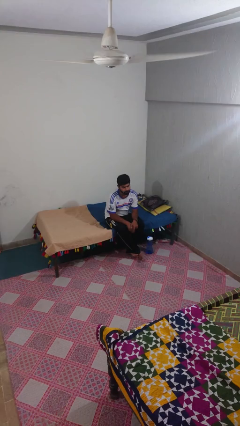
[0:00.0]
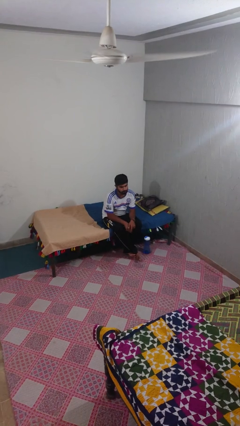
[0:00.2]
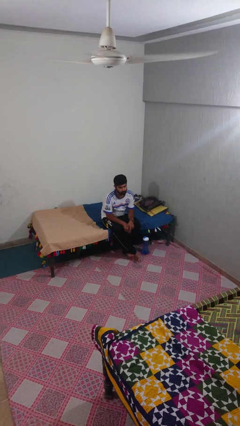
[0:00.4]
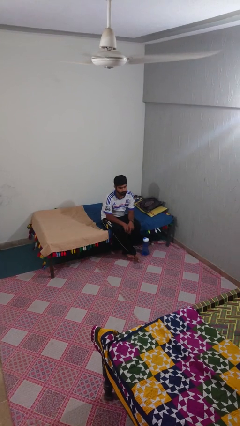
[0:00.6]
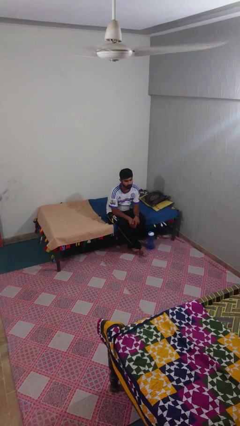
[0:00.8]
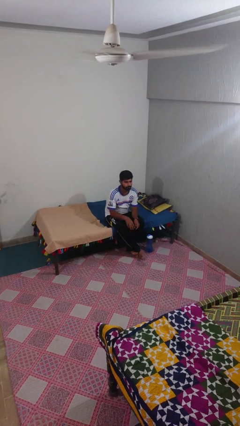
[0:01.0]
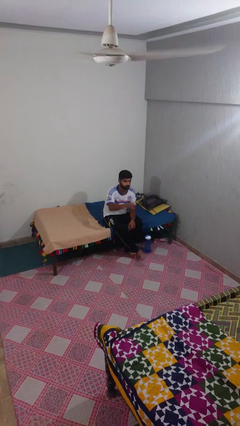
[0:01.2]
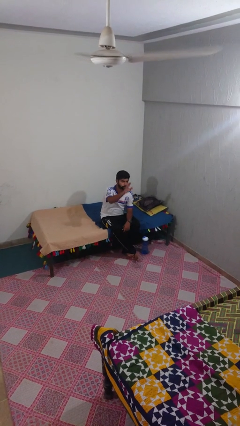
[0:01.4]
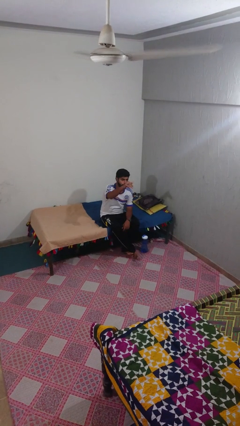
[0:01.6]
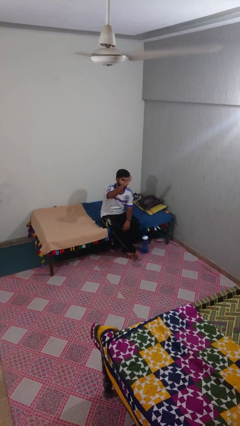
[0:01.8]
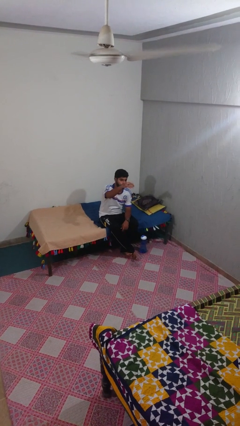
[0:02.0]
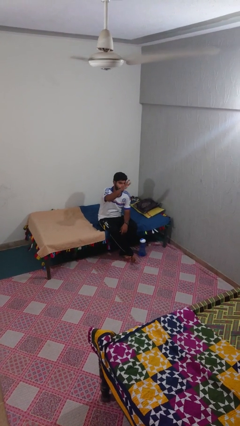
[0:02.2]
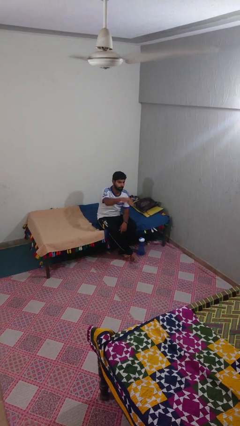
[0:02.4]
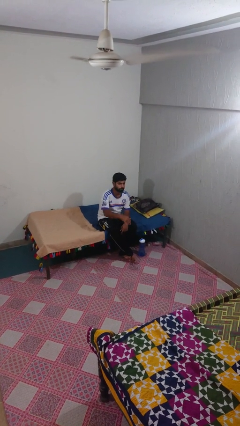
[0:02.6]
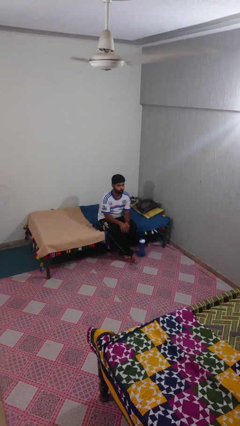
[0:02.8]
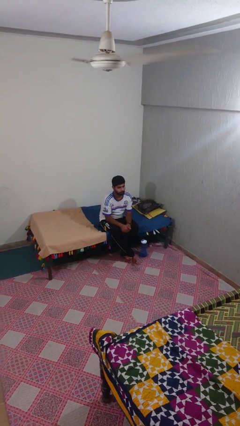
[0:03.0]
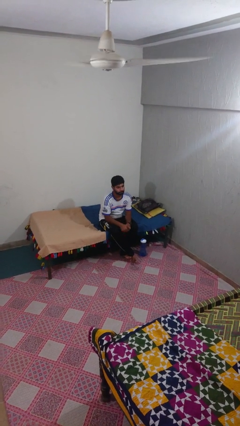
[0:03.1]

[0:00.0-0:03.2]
person gestures come here

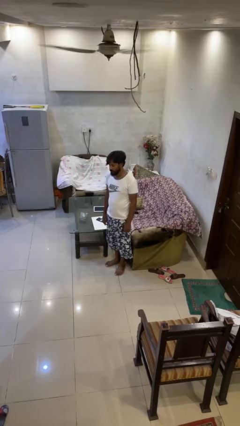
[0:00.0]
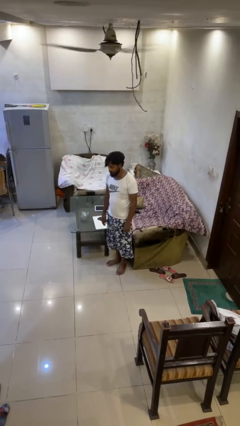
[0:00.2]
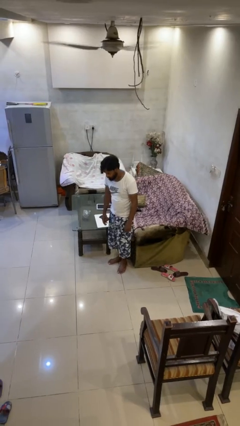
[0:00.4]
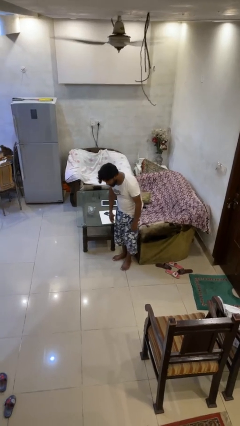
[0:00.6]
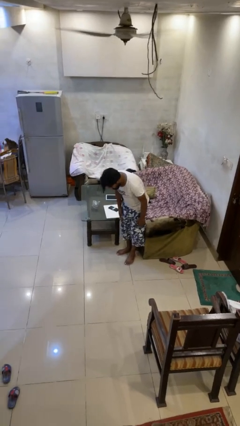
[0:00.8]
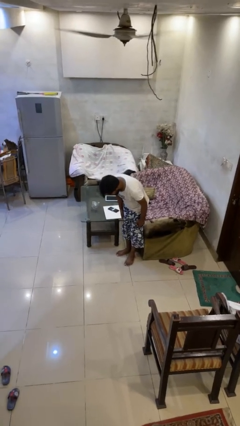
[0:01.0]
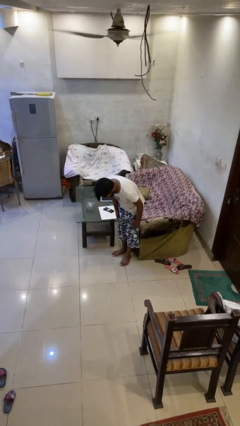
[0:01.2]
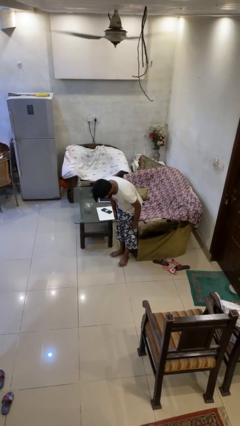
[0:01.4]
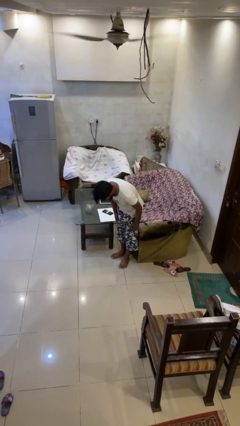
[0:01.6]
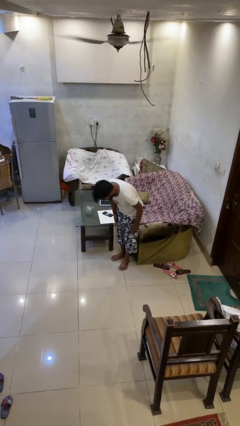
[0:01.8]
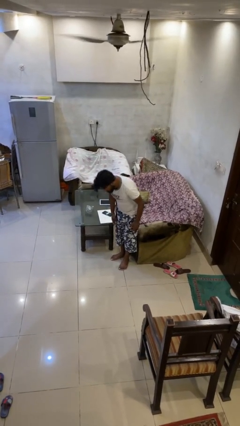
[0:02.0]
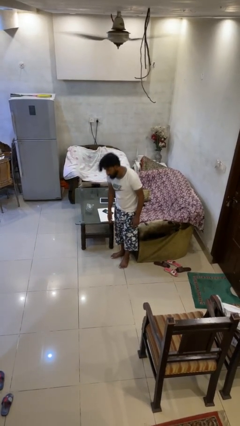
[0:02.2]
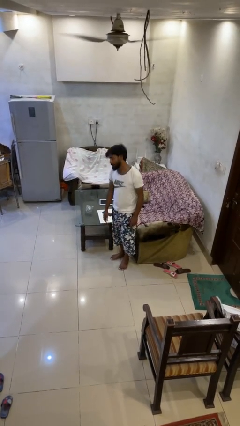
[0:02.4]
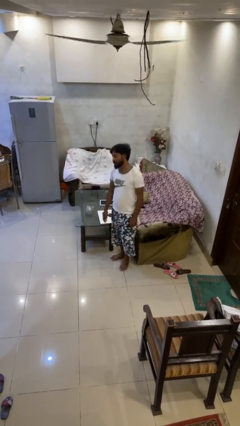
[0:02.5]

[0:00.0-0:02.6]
person bows

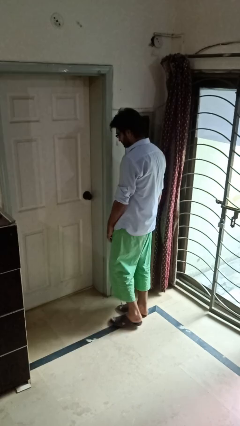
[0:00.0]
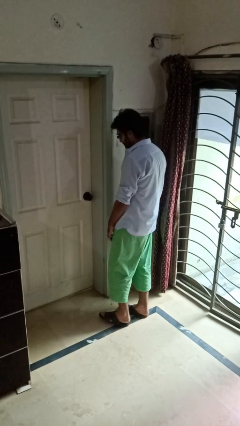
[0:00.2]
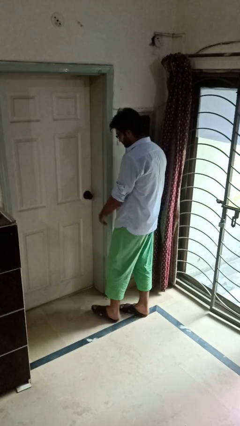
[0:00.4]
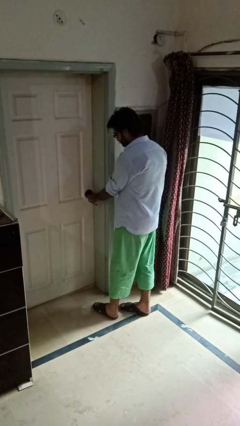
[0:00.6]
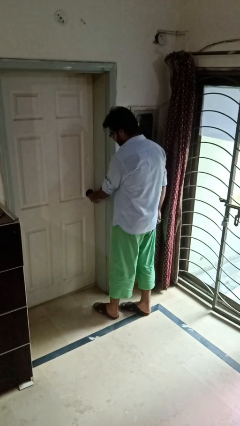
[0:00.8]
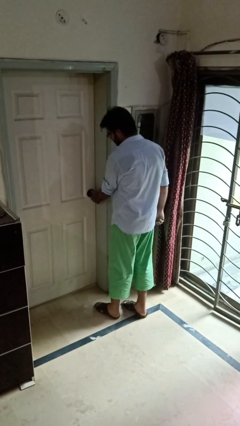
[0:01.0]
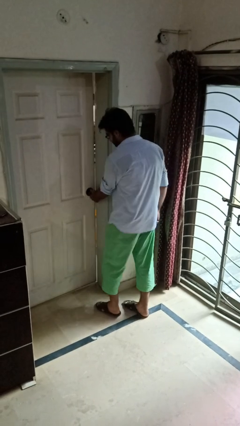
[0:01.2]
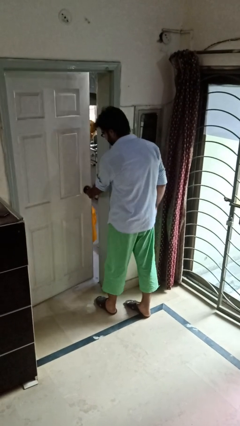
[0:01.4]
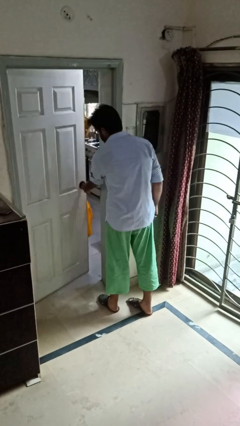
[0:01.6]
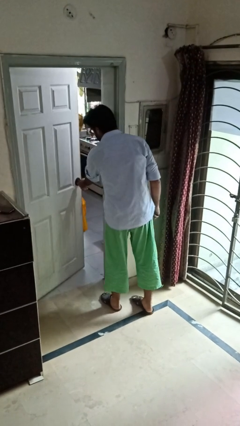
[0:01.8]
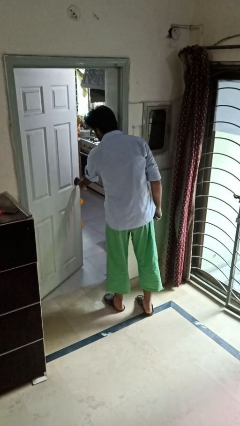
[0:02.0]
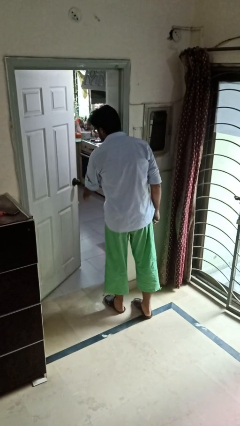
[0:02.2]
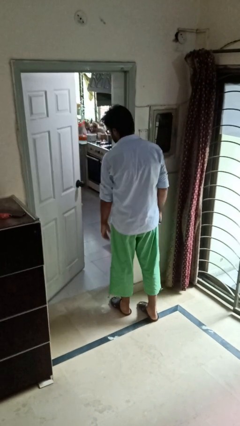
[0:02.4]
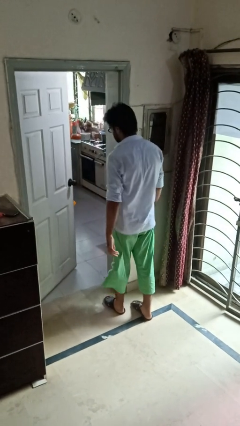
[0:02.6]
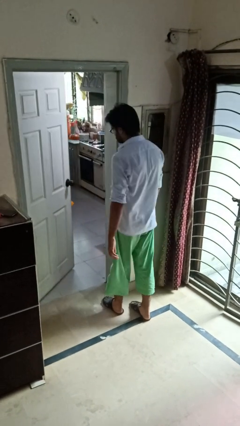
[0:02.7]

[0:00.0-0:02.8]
person opens facility door

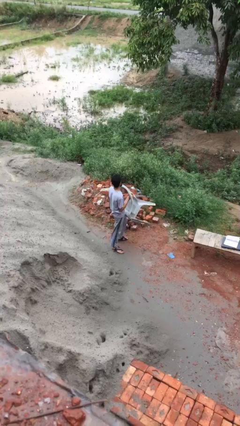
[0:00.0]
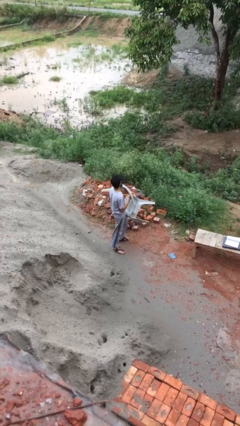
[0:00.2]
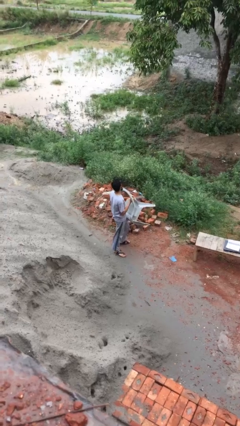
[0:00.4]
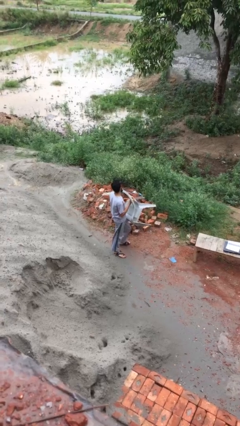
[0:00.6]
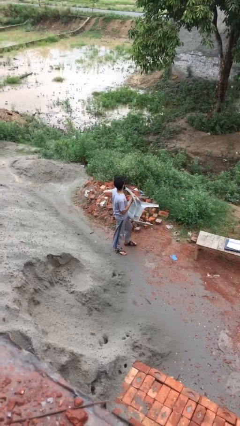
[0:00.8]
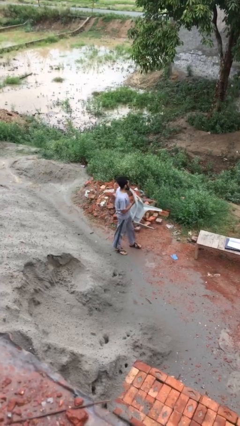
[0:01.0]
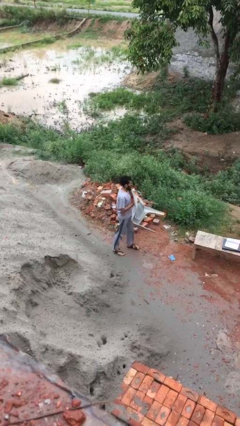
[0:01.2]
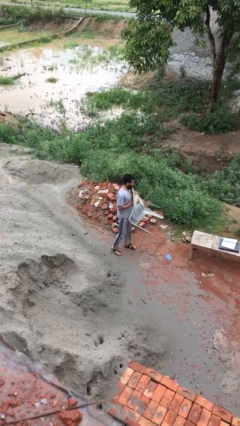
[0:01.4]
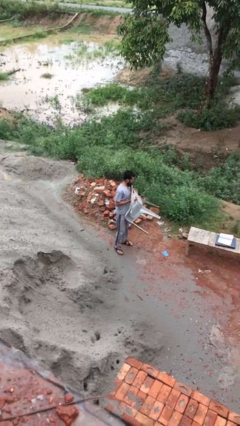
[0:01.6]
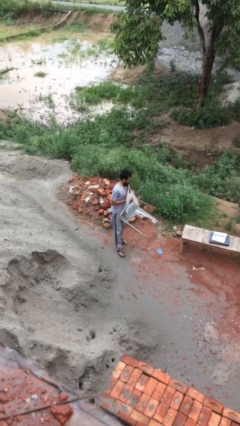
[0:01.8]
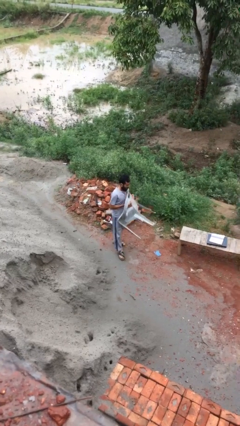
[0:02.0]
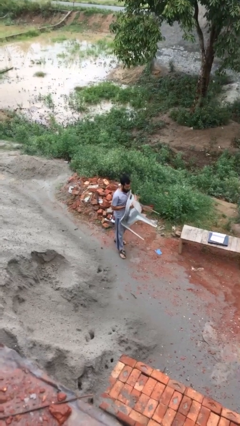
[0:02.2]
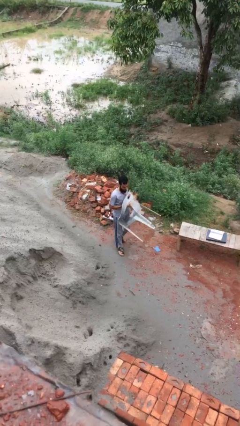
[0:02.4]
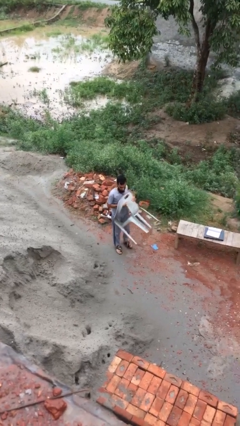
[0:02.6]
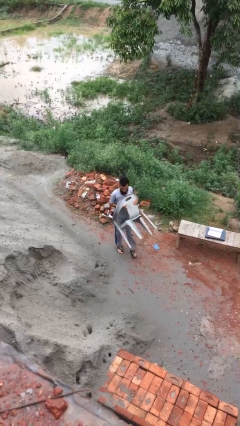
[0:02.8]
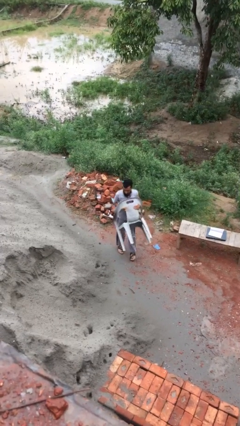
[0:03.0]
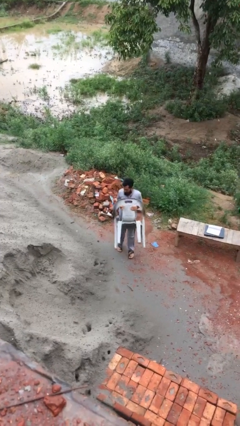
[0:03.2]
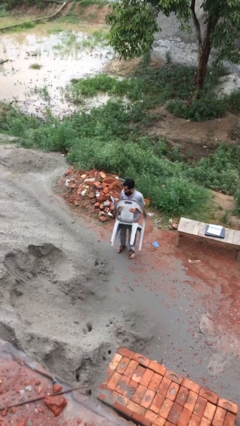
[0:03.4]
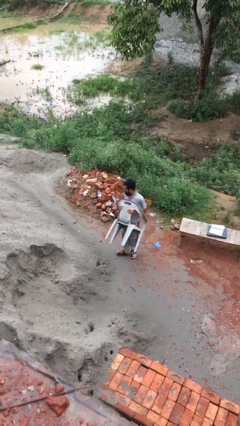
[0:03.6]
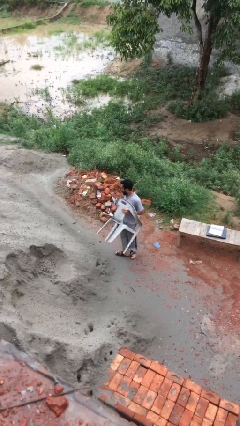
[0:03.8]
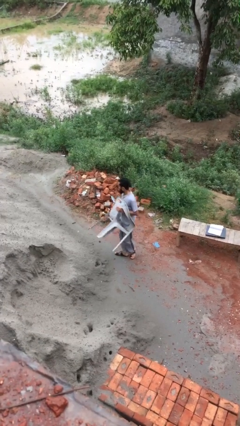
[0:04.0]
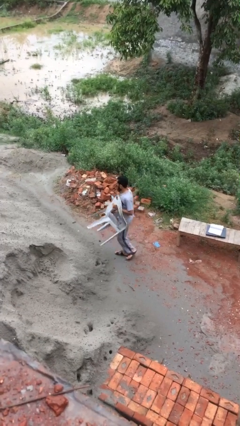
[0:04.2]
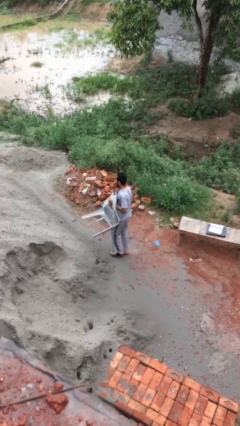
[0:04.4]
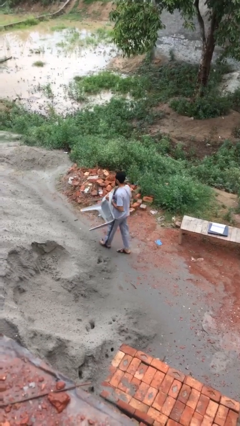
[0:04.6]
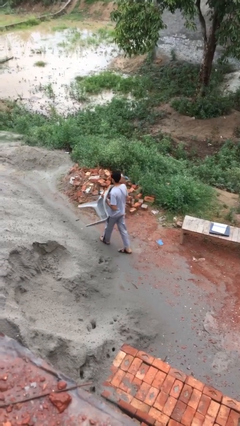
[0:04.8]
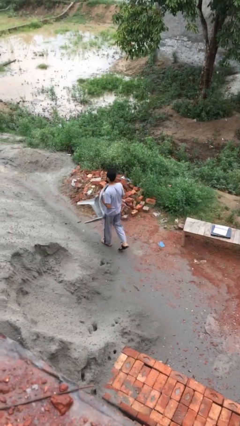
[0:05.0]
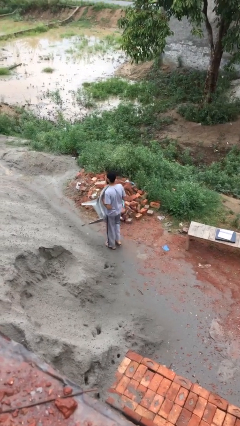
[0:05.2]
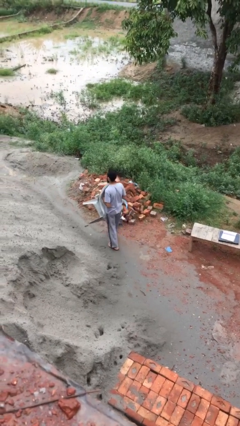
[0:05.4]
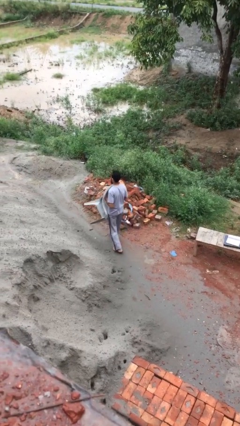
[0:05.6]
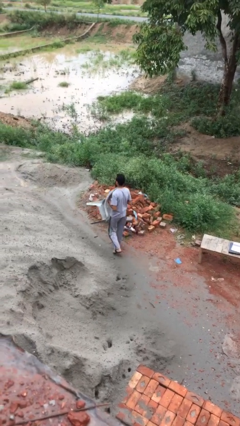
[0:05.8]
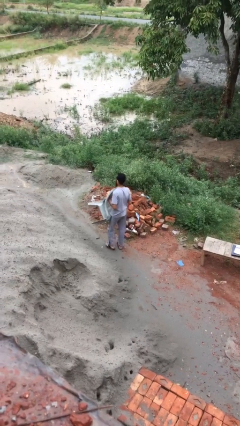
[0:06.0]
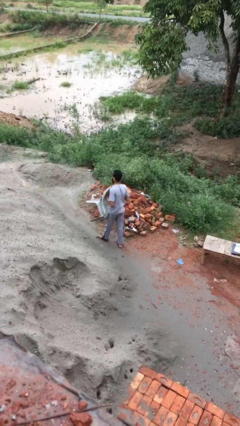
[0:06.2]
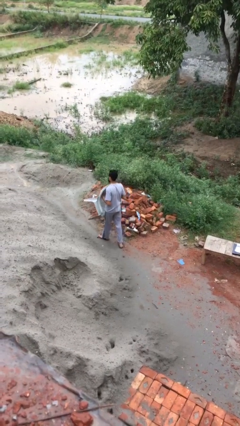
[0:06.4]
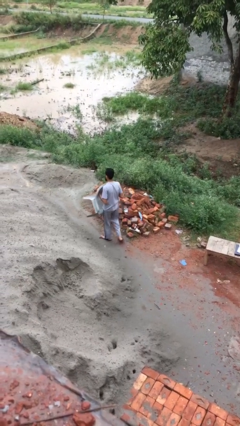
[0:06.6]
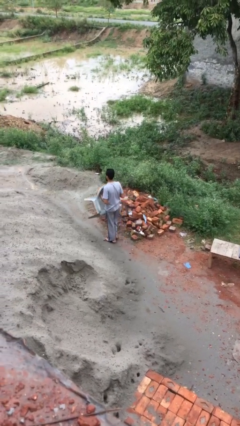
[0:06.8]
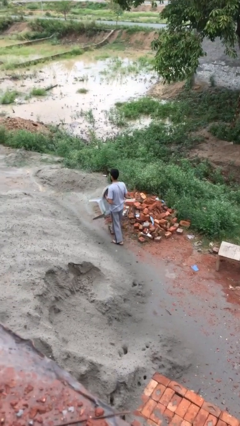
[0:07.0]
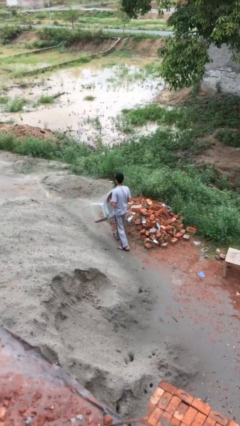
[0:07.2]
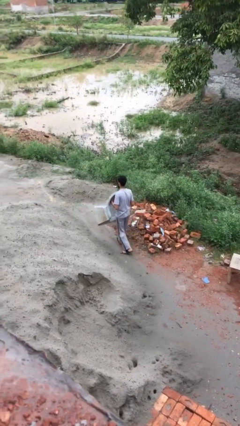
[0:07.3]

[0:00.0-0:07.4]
person puts down object on floor

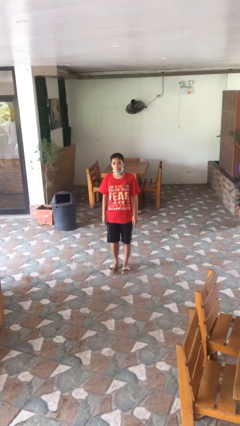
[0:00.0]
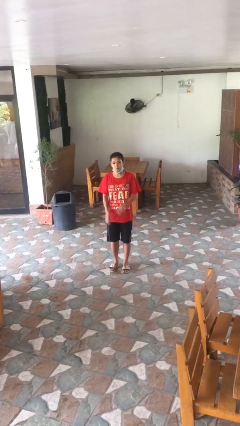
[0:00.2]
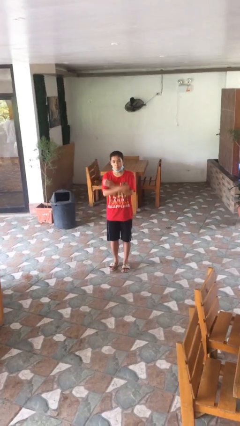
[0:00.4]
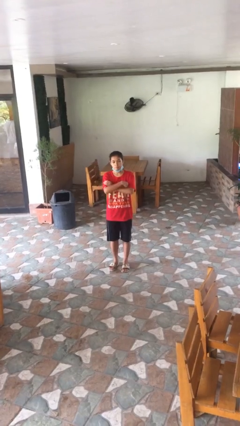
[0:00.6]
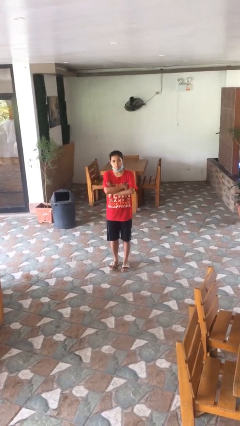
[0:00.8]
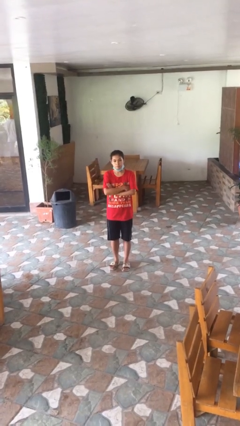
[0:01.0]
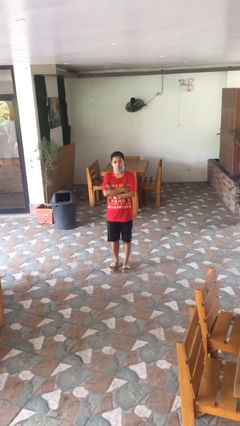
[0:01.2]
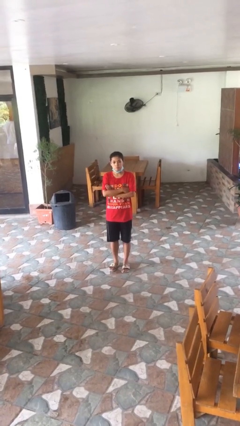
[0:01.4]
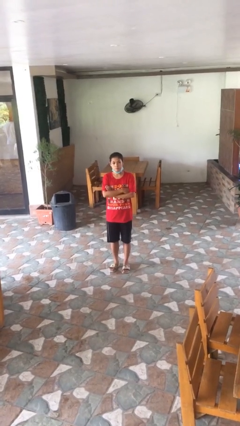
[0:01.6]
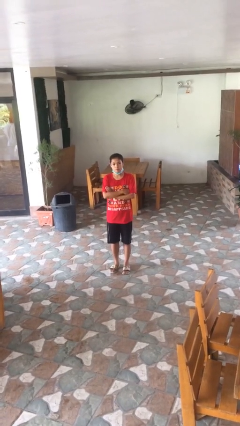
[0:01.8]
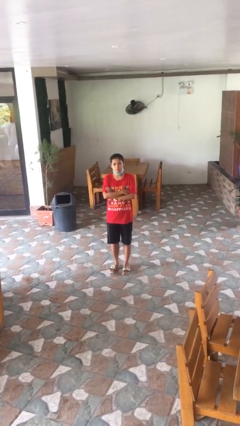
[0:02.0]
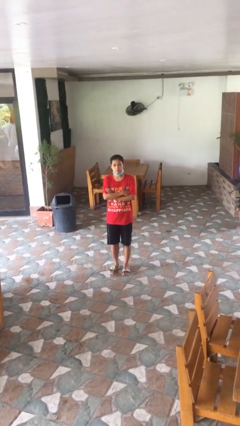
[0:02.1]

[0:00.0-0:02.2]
person crosses arms
